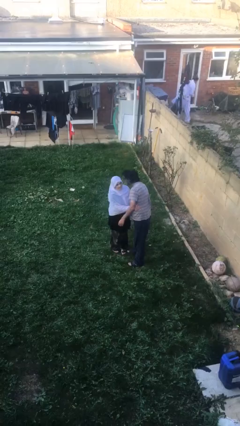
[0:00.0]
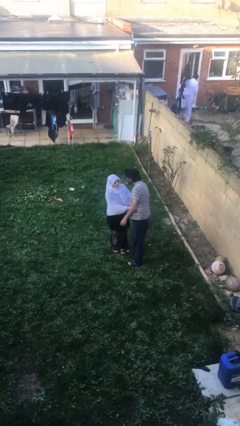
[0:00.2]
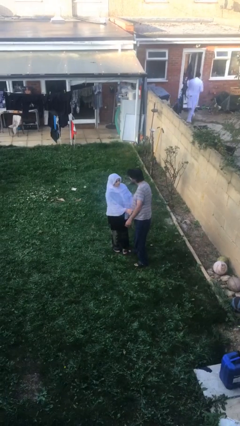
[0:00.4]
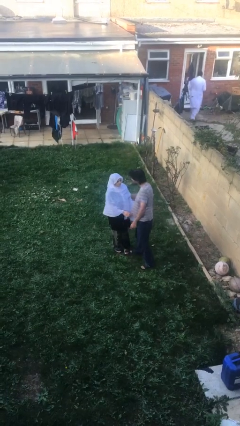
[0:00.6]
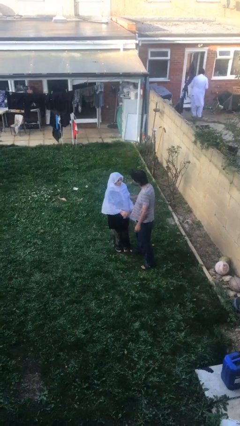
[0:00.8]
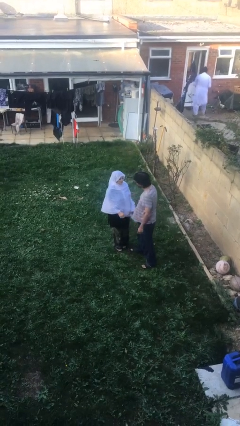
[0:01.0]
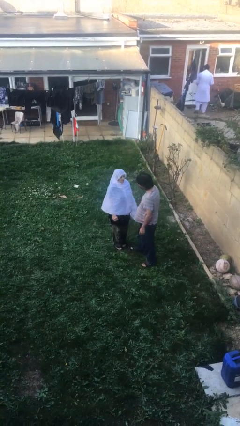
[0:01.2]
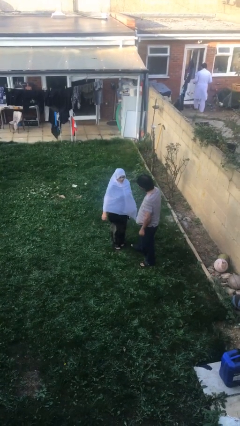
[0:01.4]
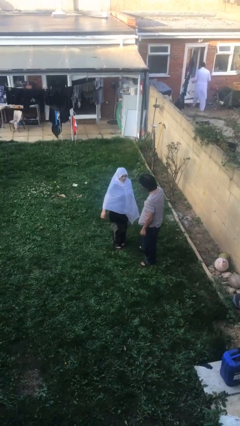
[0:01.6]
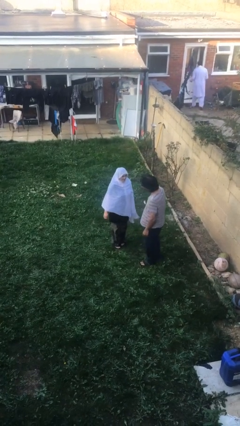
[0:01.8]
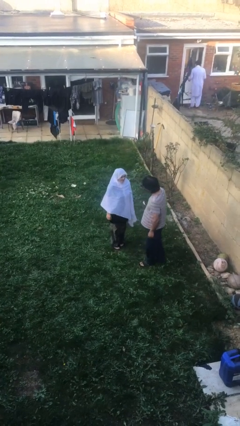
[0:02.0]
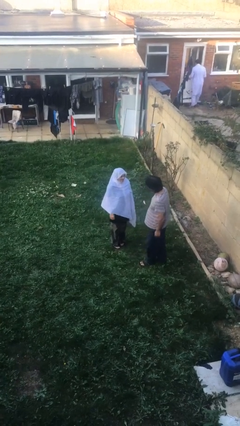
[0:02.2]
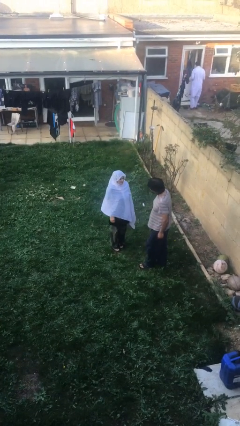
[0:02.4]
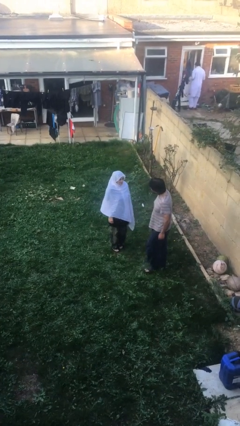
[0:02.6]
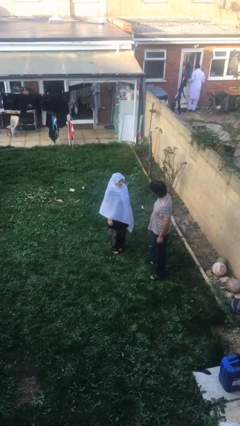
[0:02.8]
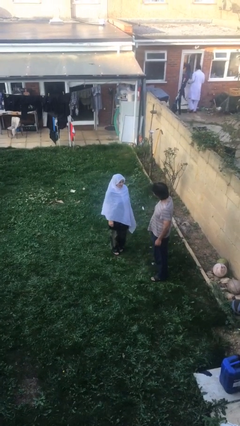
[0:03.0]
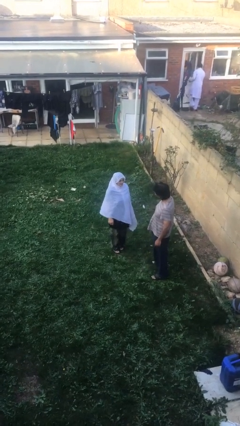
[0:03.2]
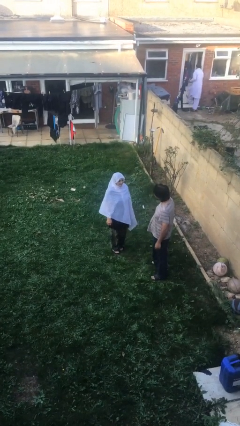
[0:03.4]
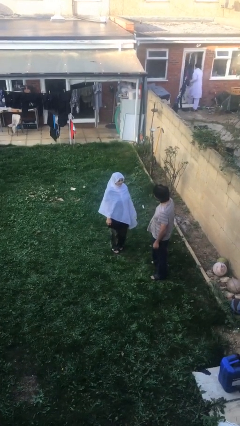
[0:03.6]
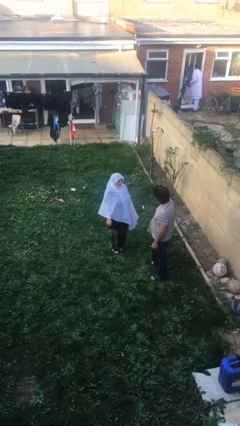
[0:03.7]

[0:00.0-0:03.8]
person talks to person

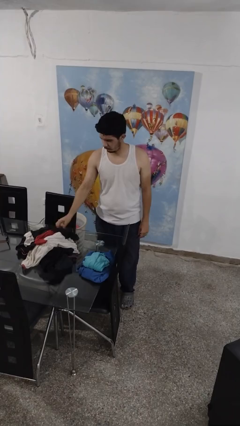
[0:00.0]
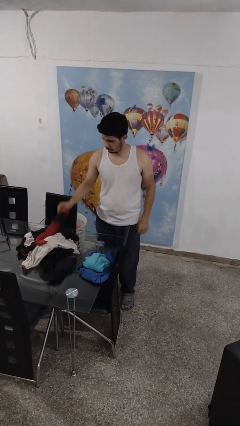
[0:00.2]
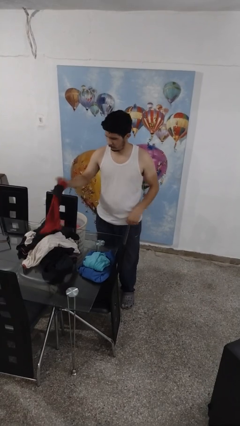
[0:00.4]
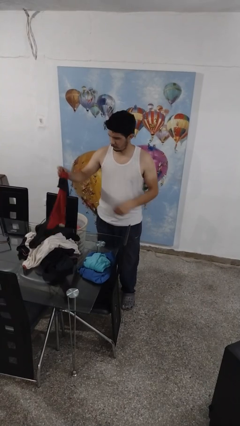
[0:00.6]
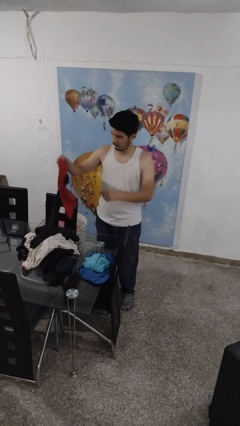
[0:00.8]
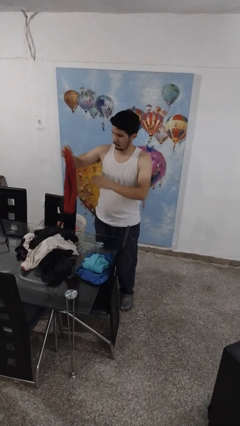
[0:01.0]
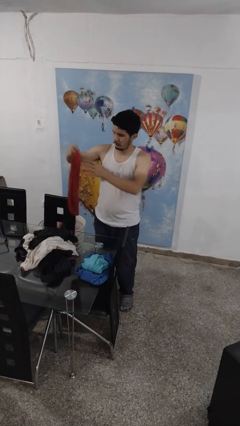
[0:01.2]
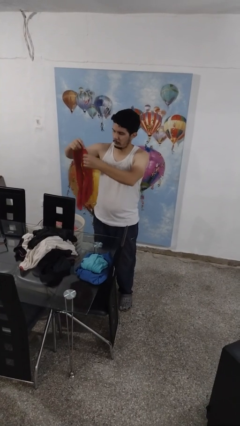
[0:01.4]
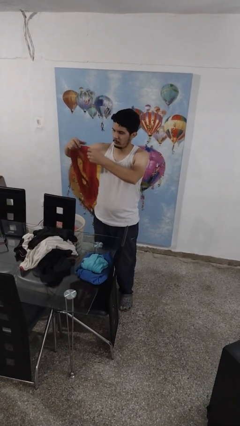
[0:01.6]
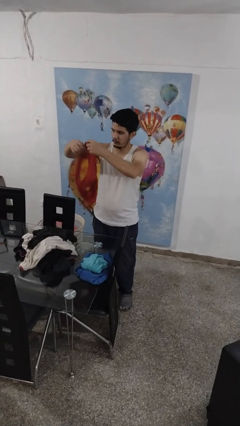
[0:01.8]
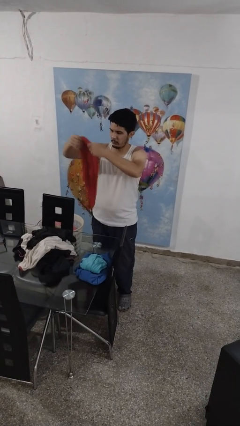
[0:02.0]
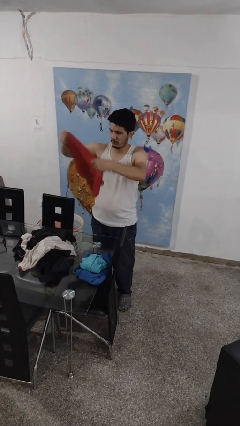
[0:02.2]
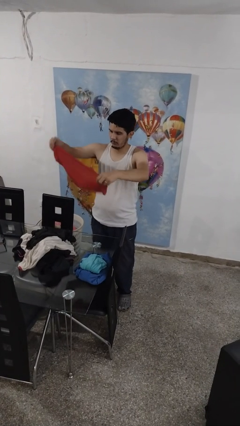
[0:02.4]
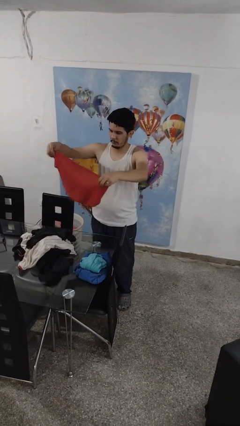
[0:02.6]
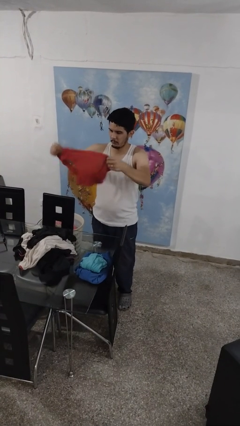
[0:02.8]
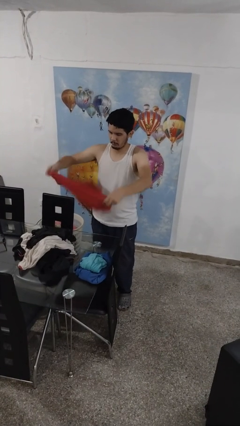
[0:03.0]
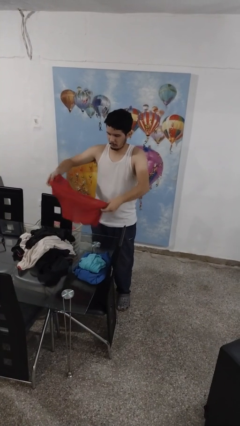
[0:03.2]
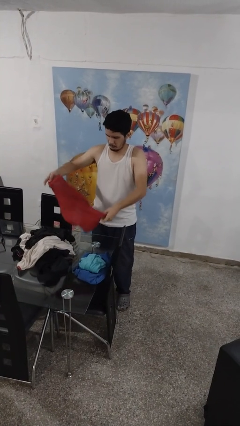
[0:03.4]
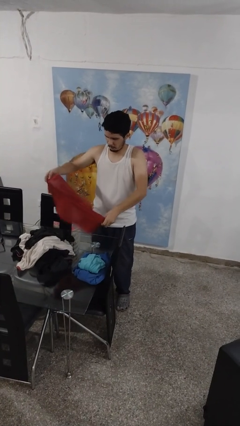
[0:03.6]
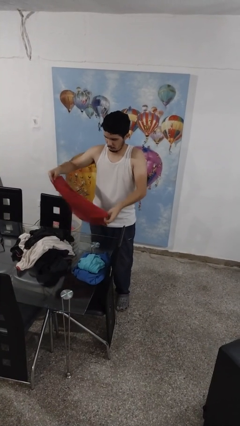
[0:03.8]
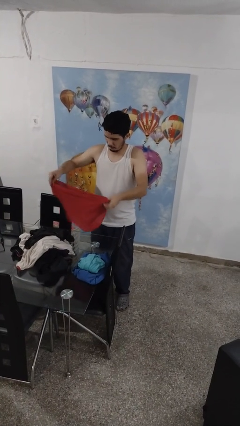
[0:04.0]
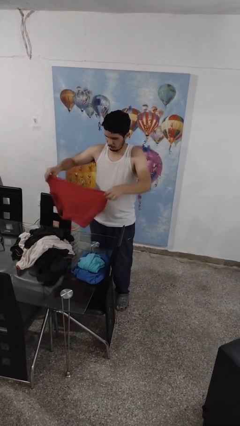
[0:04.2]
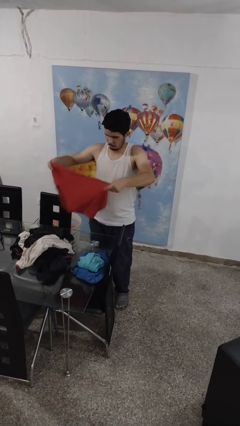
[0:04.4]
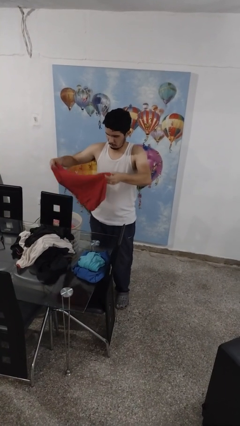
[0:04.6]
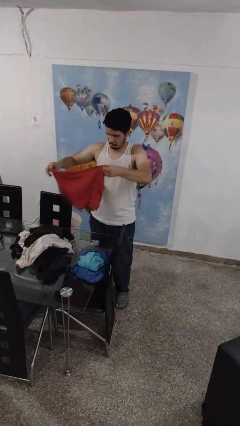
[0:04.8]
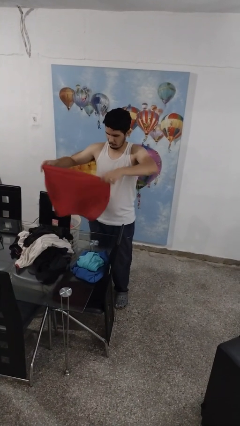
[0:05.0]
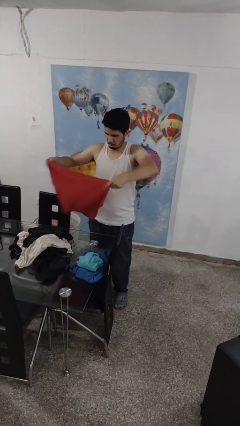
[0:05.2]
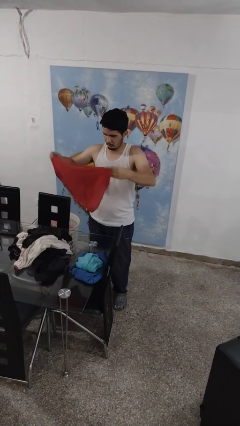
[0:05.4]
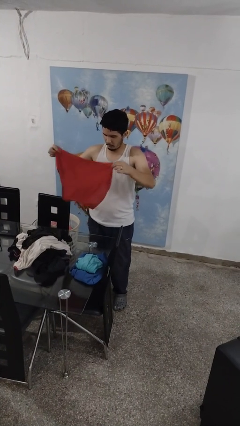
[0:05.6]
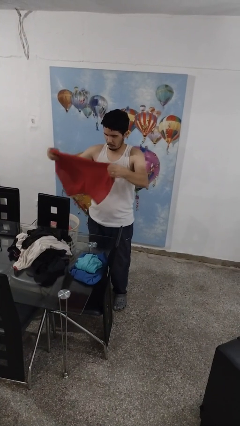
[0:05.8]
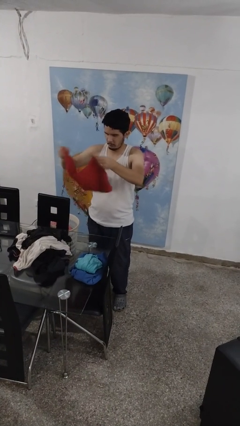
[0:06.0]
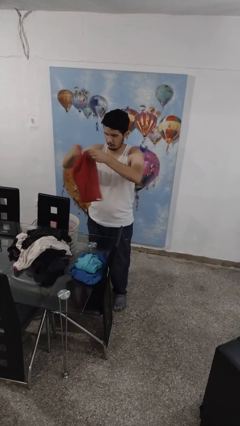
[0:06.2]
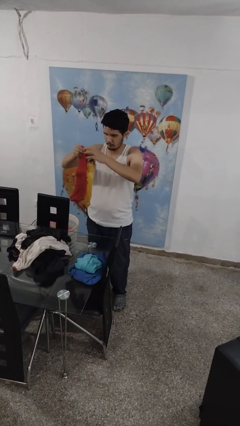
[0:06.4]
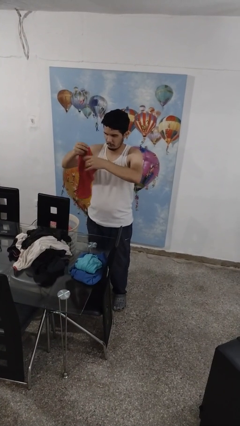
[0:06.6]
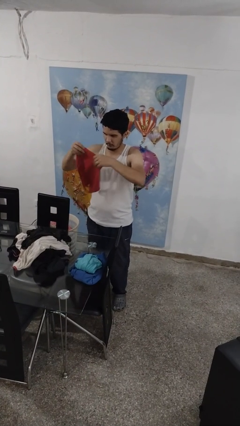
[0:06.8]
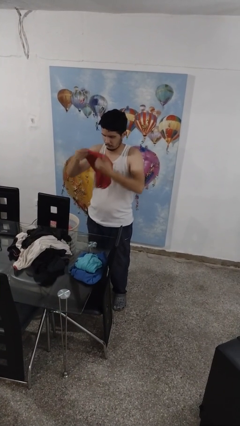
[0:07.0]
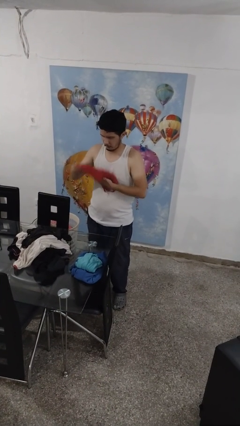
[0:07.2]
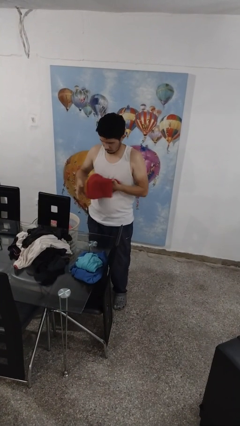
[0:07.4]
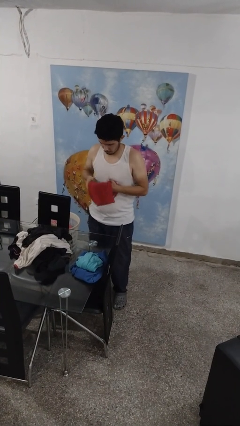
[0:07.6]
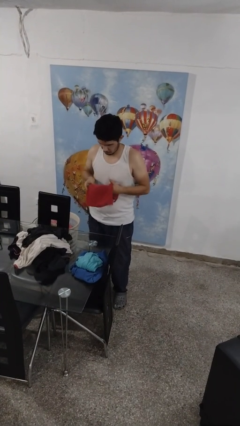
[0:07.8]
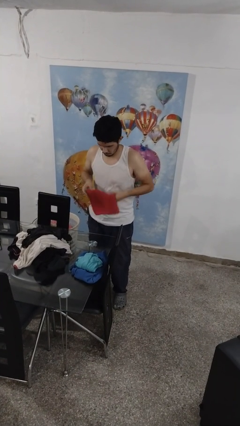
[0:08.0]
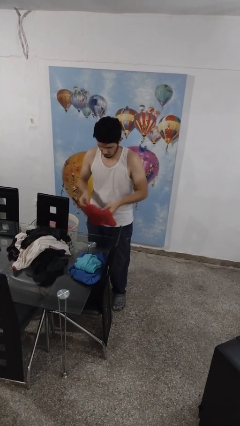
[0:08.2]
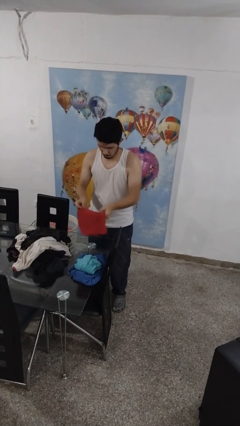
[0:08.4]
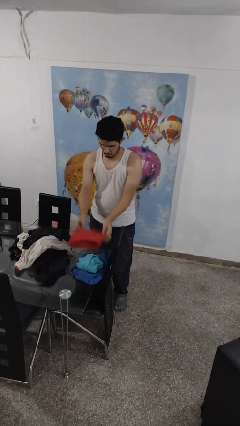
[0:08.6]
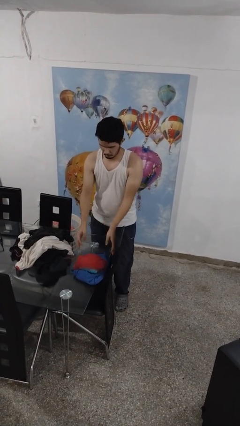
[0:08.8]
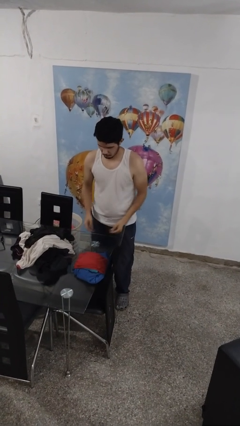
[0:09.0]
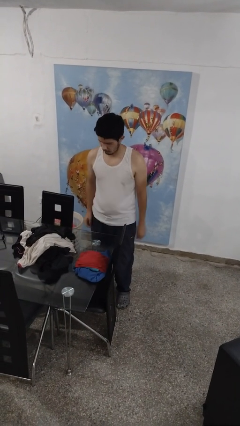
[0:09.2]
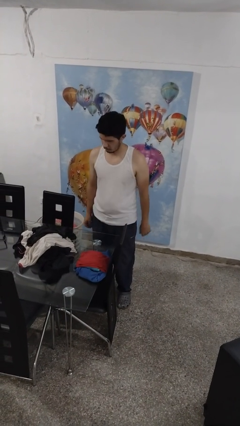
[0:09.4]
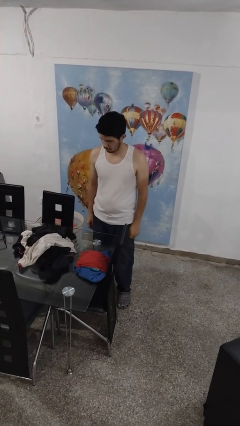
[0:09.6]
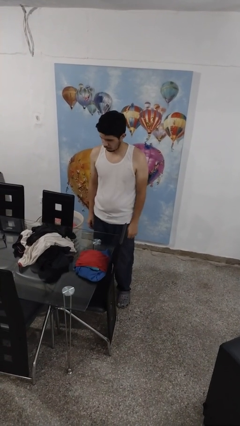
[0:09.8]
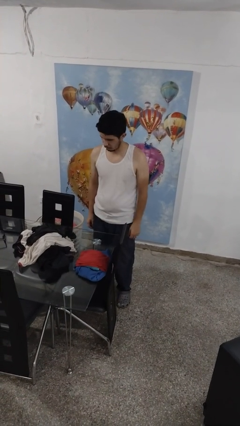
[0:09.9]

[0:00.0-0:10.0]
person folds shirt

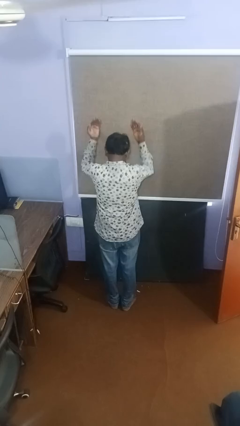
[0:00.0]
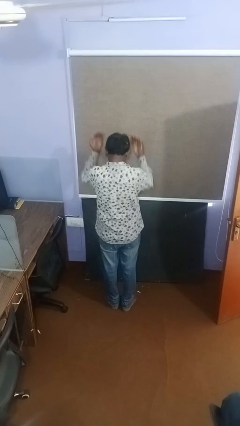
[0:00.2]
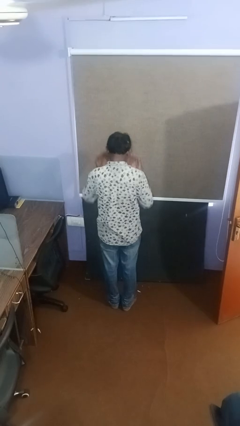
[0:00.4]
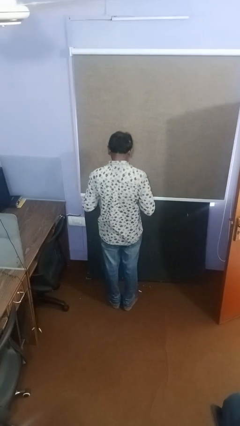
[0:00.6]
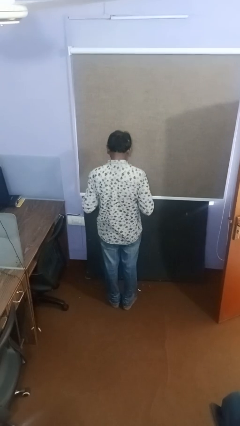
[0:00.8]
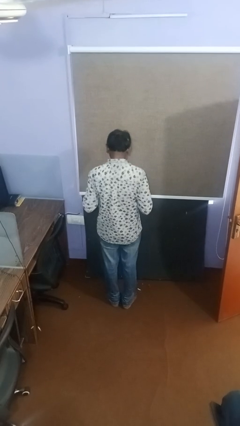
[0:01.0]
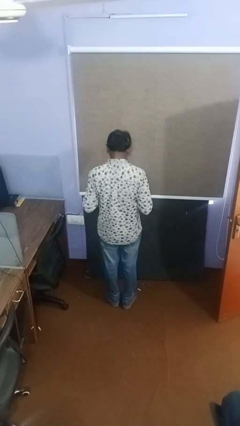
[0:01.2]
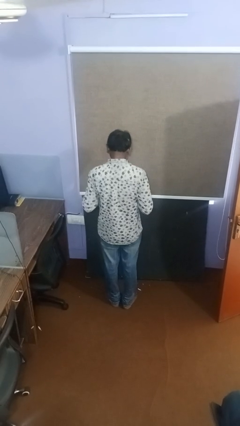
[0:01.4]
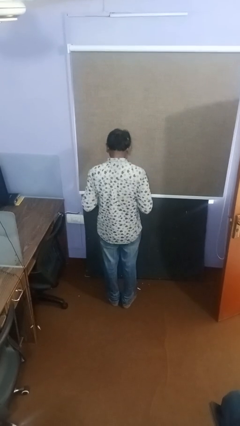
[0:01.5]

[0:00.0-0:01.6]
person gestures swipe down

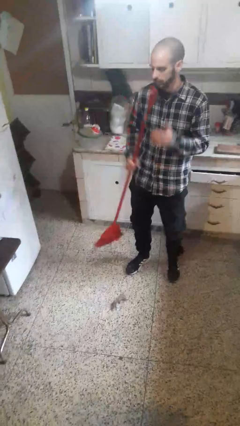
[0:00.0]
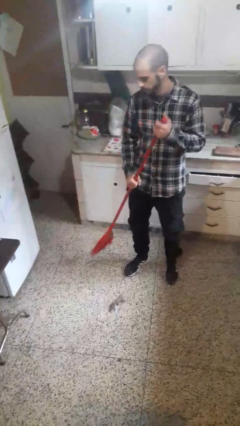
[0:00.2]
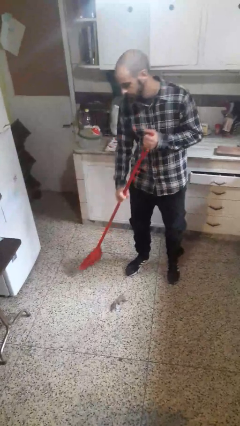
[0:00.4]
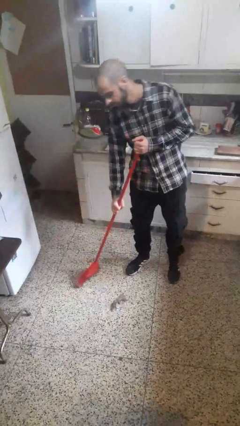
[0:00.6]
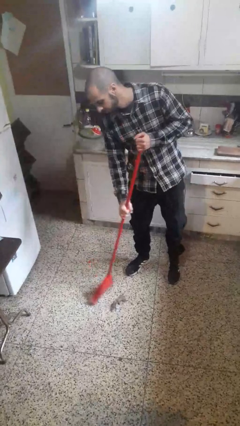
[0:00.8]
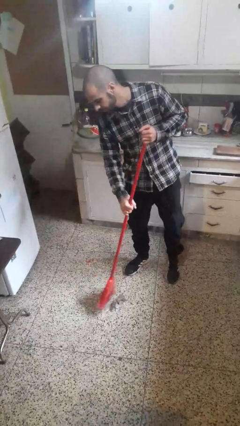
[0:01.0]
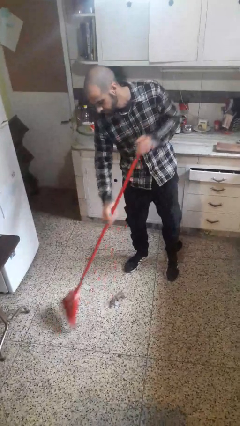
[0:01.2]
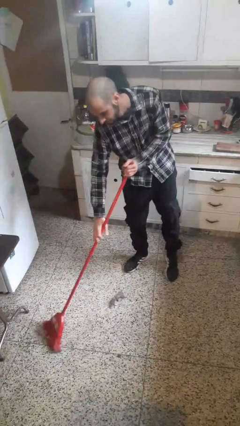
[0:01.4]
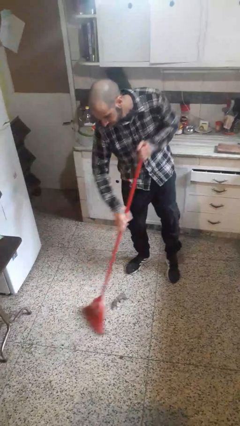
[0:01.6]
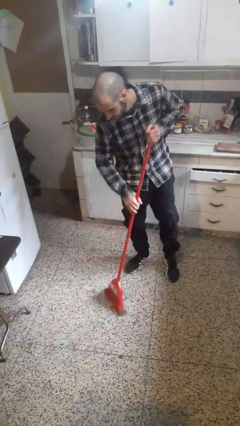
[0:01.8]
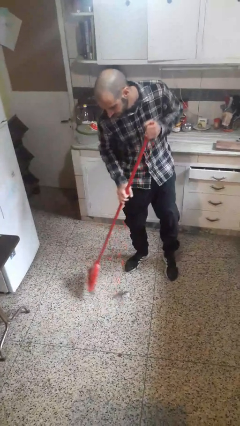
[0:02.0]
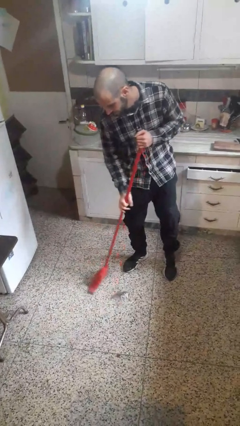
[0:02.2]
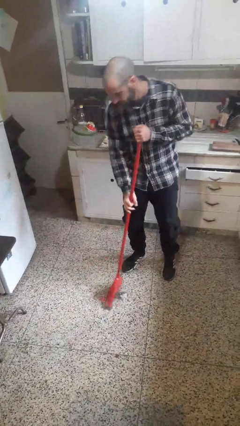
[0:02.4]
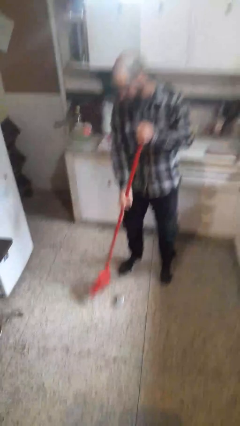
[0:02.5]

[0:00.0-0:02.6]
person sweeps floor
